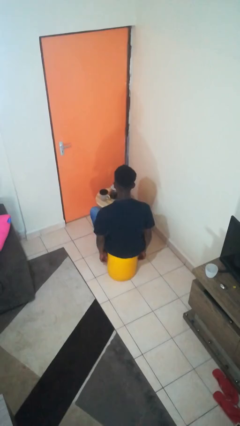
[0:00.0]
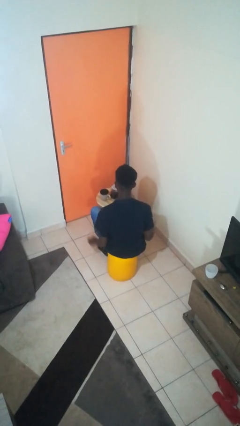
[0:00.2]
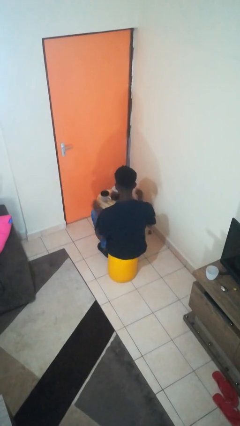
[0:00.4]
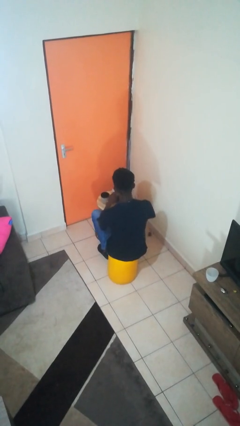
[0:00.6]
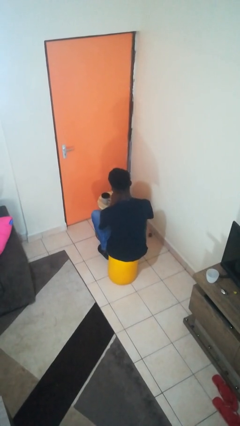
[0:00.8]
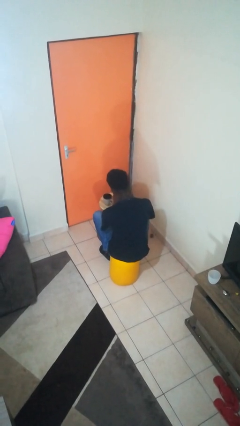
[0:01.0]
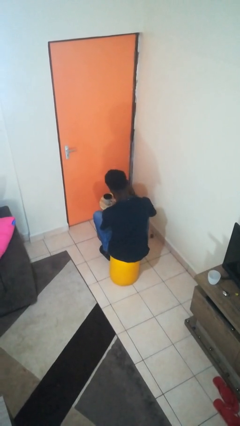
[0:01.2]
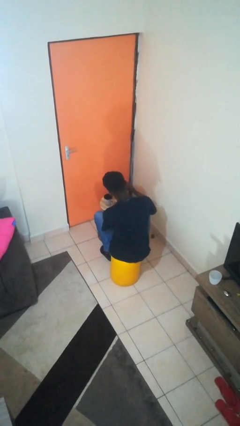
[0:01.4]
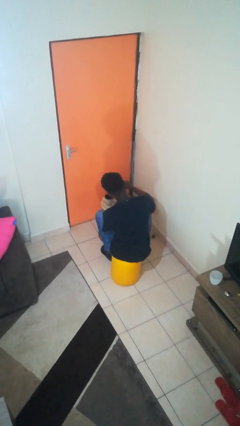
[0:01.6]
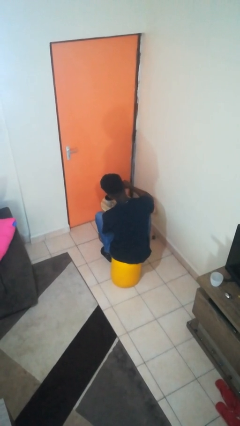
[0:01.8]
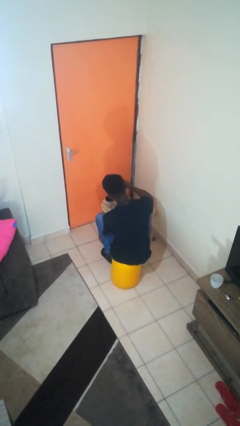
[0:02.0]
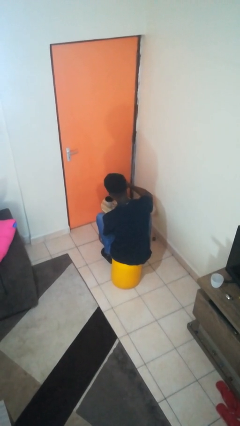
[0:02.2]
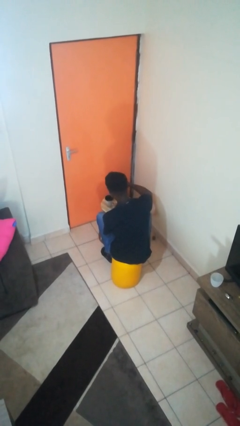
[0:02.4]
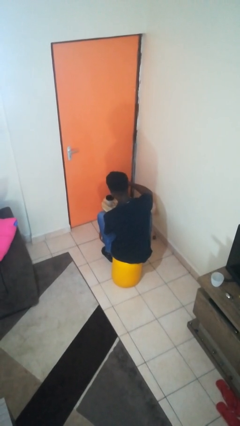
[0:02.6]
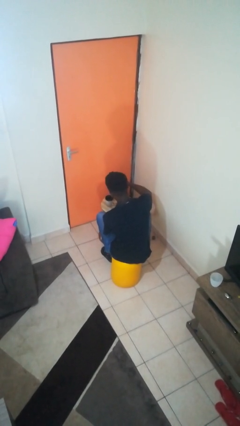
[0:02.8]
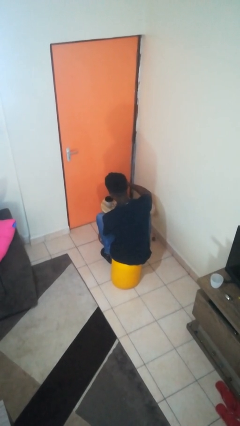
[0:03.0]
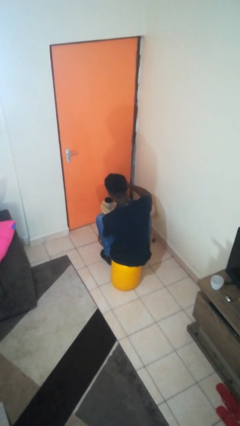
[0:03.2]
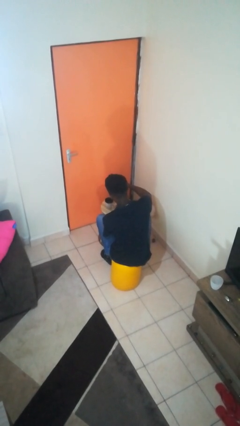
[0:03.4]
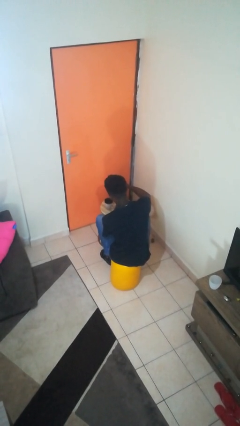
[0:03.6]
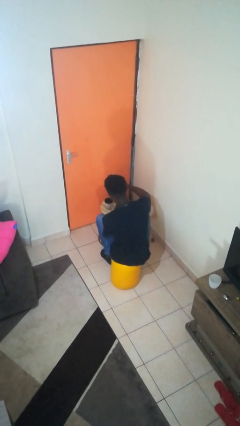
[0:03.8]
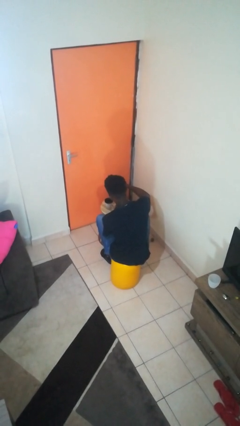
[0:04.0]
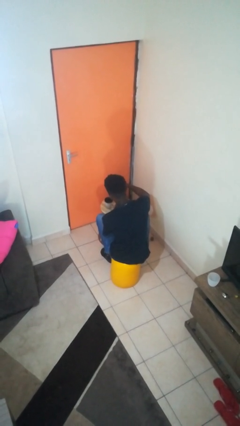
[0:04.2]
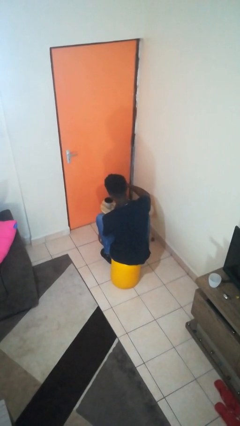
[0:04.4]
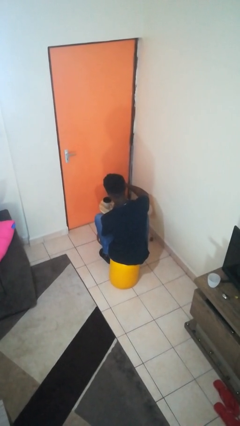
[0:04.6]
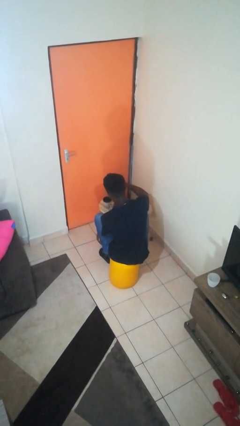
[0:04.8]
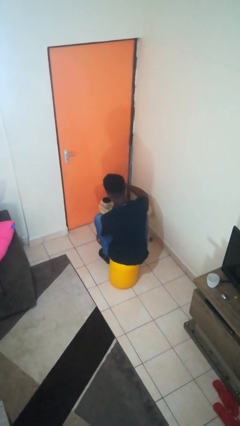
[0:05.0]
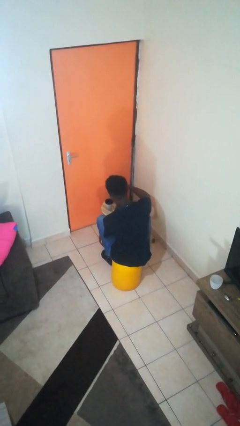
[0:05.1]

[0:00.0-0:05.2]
person pours coffee into mug

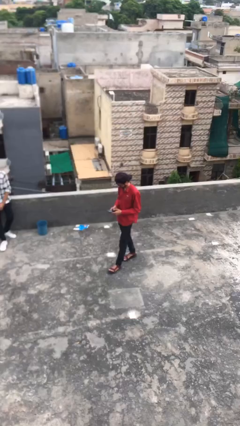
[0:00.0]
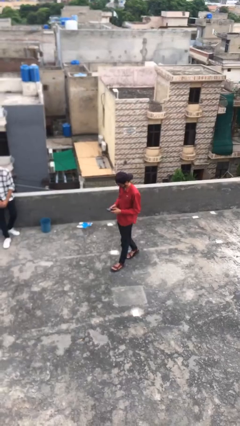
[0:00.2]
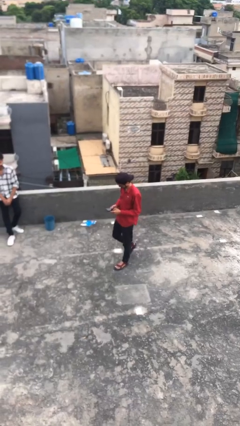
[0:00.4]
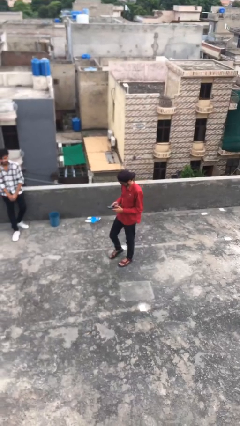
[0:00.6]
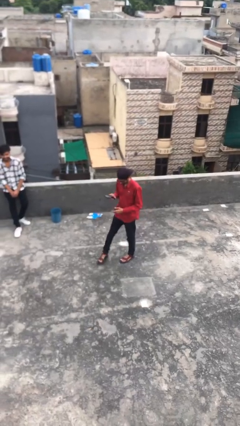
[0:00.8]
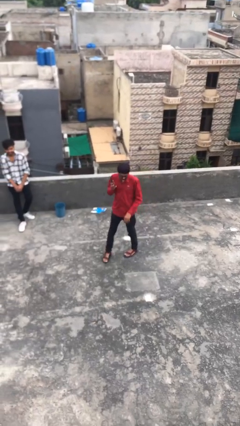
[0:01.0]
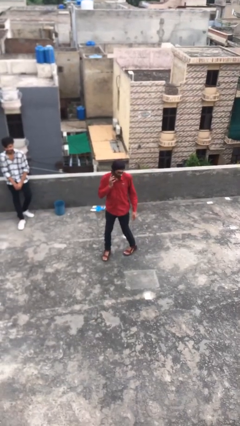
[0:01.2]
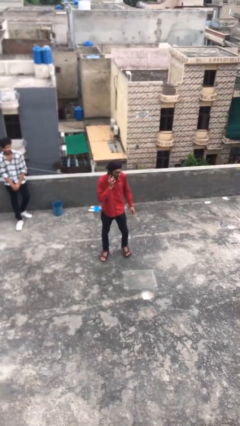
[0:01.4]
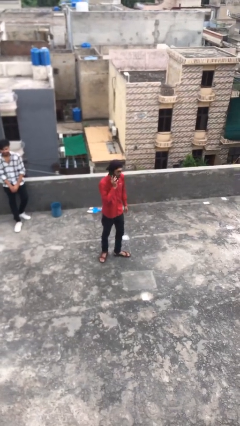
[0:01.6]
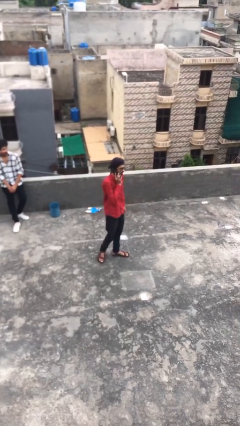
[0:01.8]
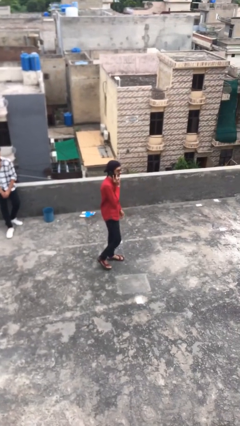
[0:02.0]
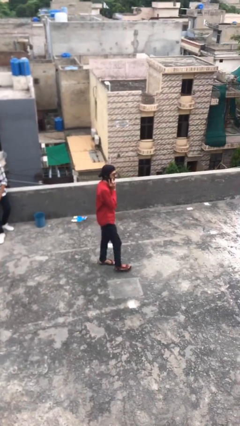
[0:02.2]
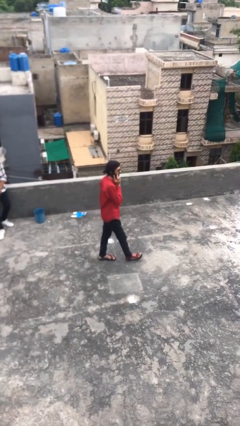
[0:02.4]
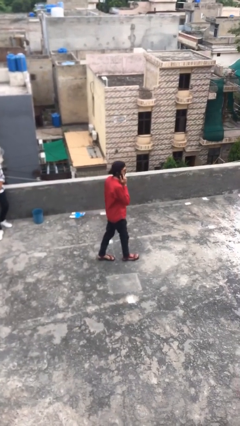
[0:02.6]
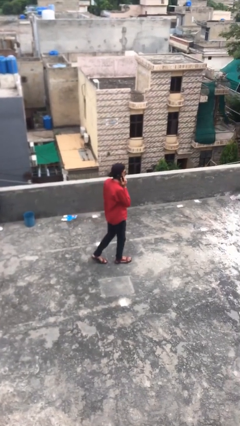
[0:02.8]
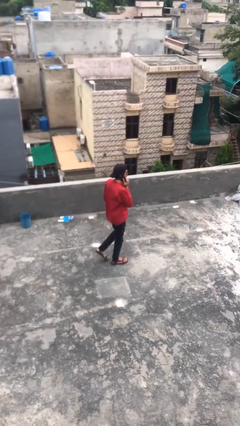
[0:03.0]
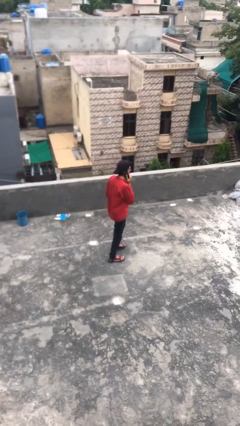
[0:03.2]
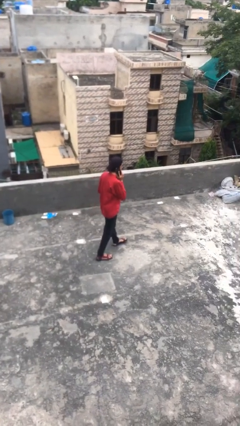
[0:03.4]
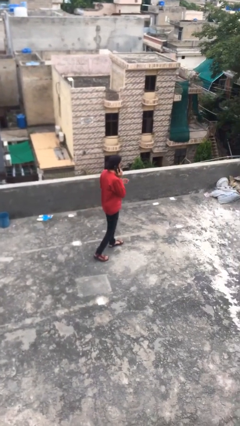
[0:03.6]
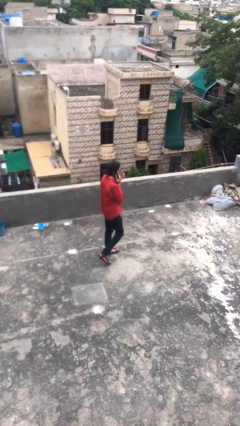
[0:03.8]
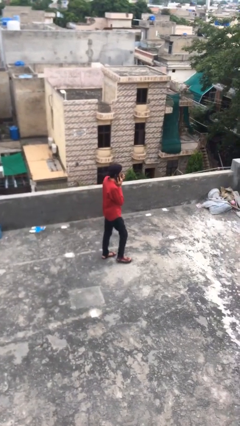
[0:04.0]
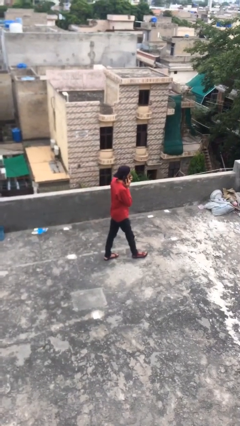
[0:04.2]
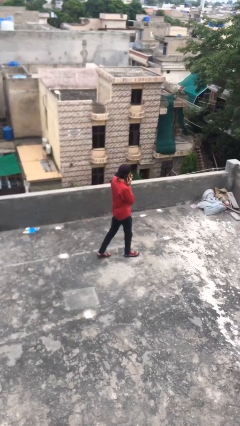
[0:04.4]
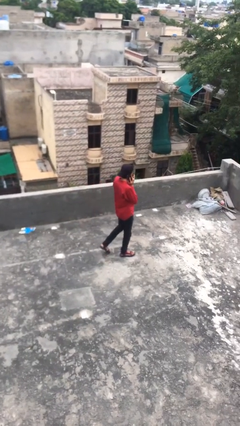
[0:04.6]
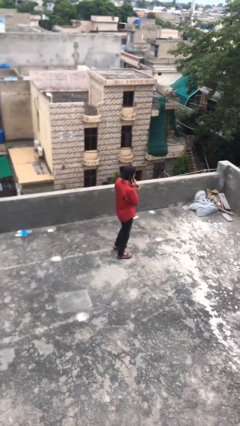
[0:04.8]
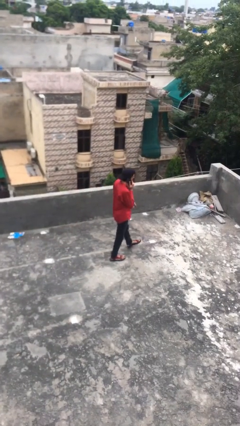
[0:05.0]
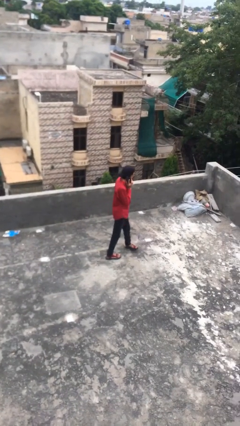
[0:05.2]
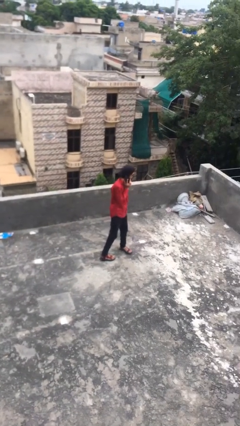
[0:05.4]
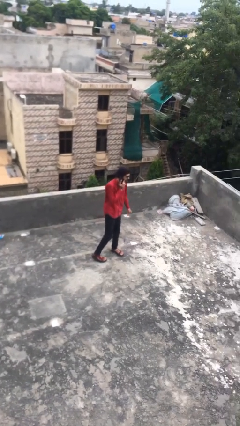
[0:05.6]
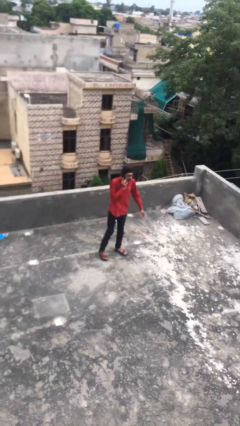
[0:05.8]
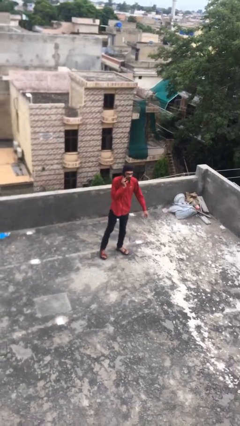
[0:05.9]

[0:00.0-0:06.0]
person talks on phone

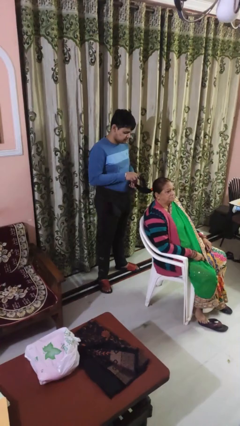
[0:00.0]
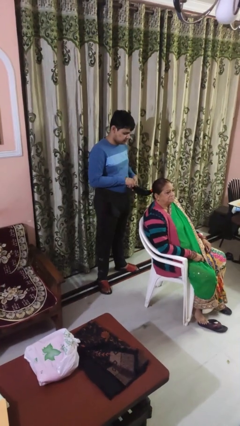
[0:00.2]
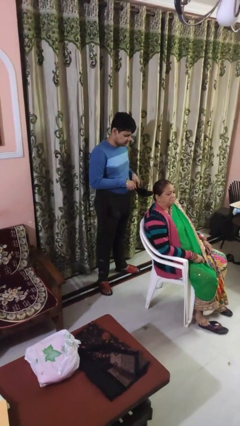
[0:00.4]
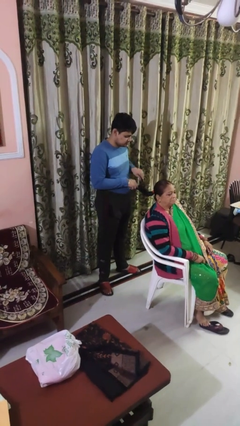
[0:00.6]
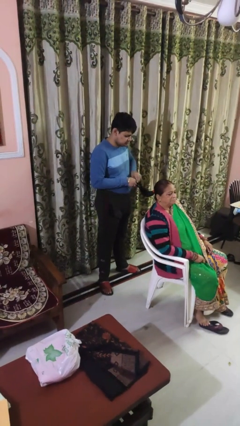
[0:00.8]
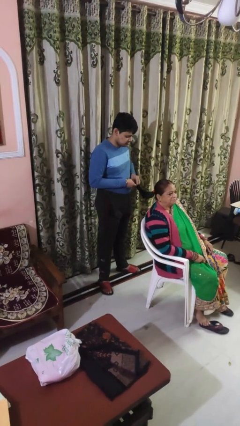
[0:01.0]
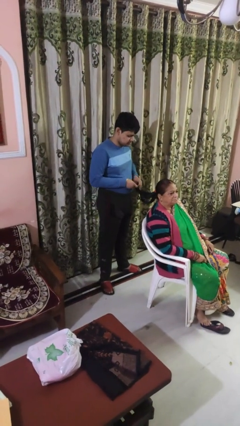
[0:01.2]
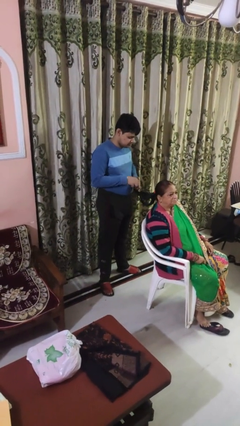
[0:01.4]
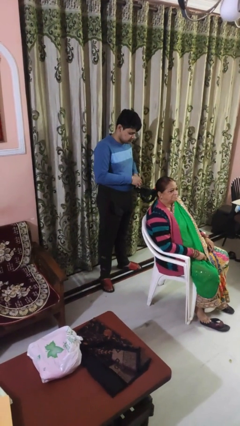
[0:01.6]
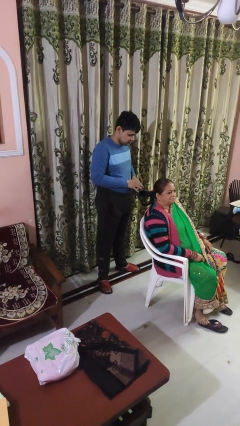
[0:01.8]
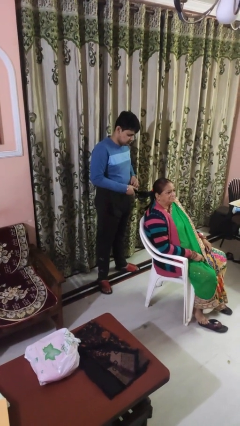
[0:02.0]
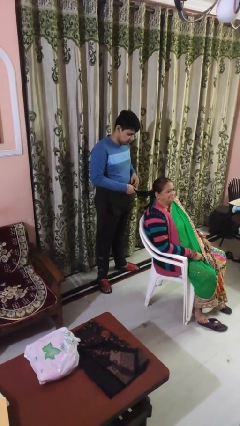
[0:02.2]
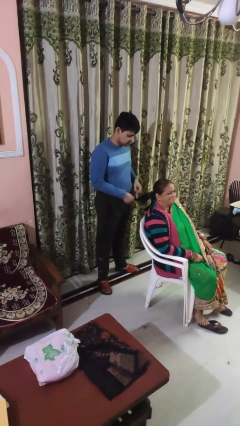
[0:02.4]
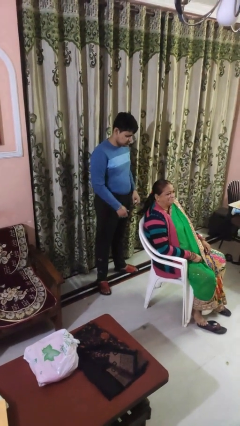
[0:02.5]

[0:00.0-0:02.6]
person braids hair of person

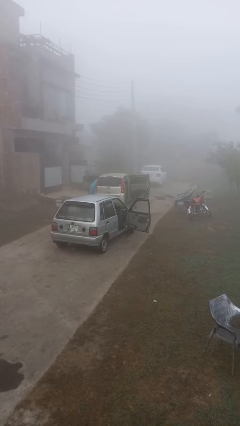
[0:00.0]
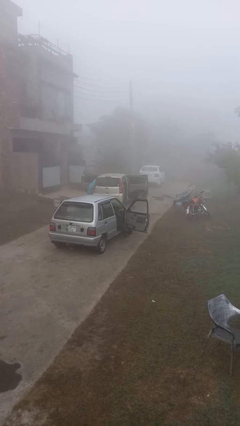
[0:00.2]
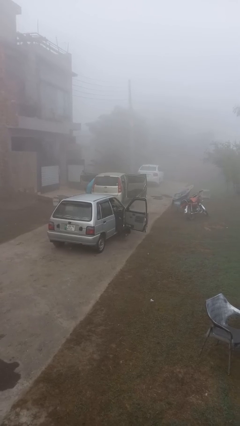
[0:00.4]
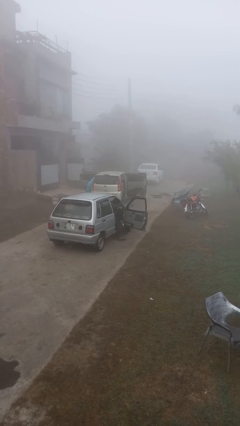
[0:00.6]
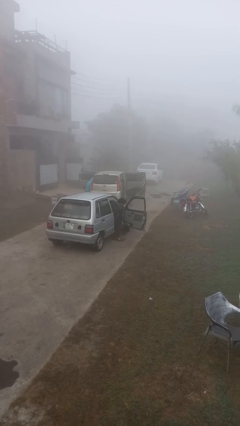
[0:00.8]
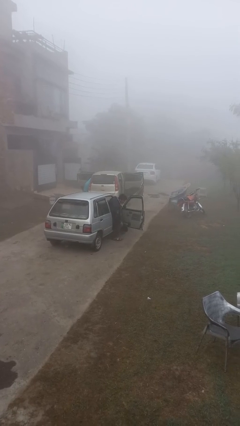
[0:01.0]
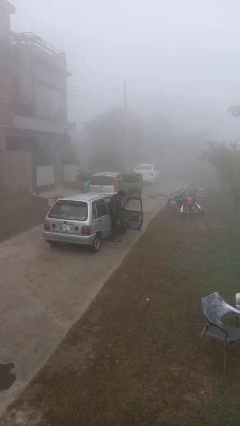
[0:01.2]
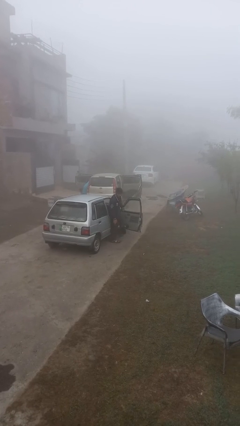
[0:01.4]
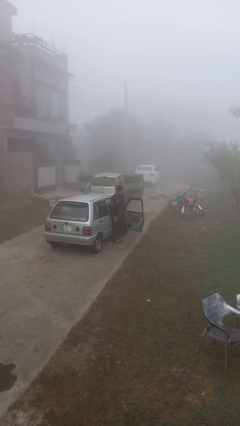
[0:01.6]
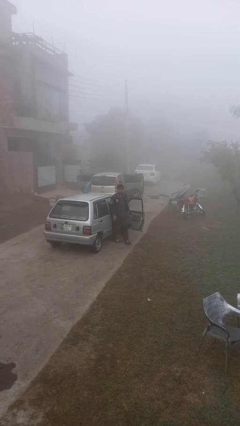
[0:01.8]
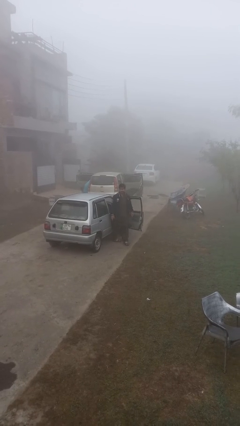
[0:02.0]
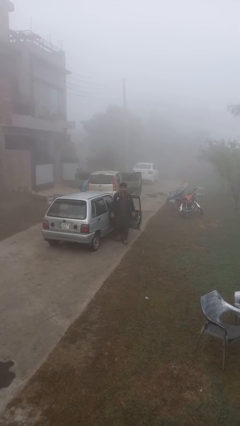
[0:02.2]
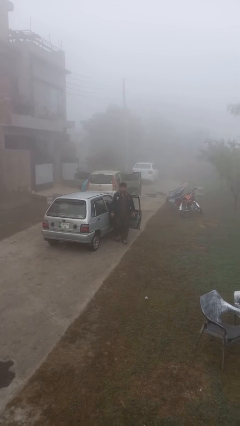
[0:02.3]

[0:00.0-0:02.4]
person exits car

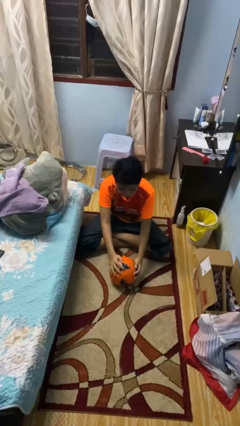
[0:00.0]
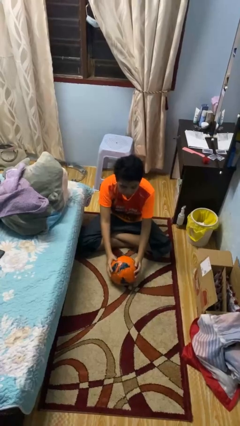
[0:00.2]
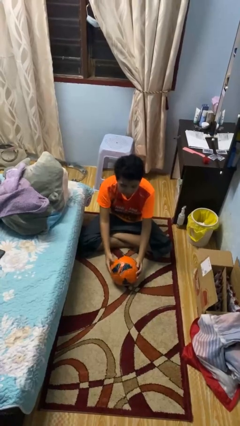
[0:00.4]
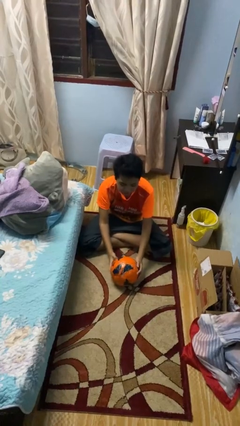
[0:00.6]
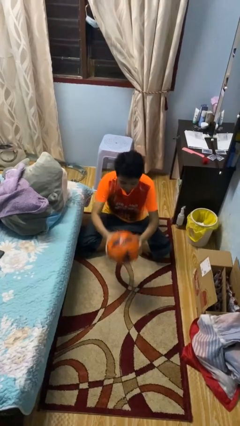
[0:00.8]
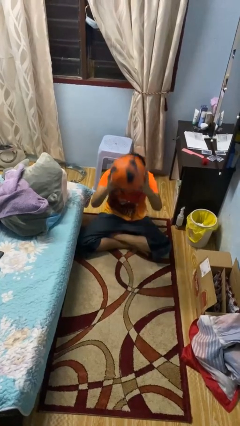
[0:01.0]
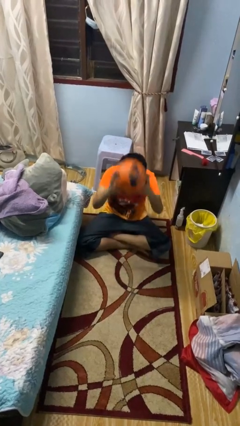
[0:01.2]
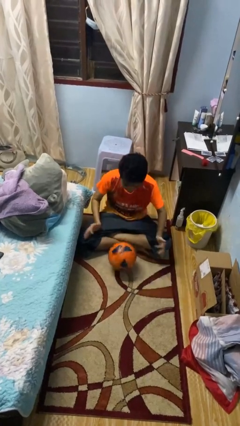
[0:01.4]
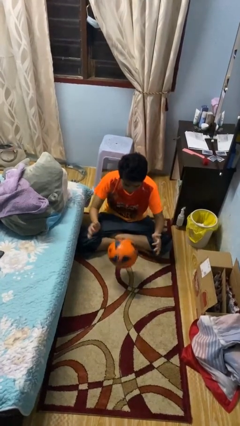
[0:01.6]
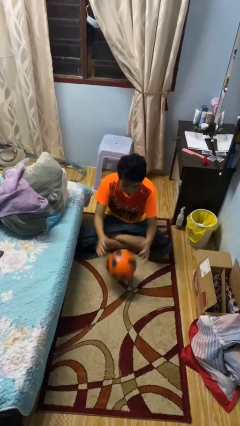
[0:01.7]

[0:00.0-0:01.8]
person bounces ball on floor
